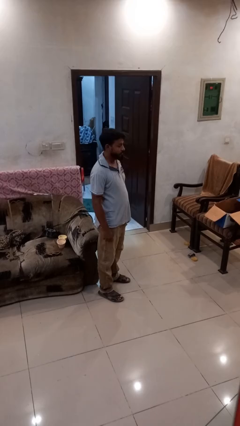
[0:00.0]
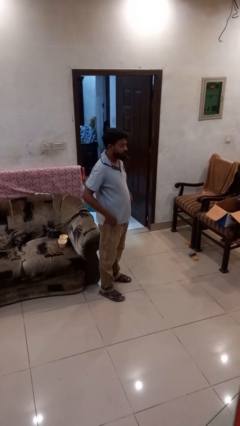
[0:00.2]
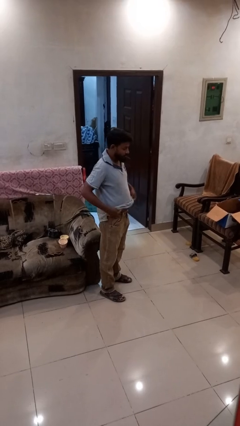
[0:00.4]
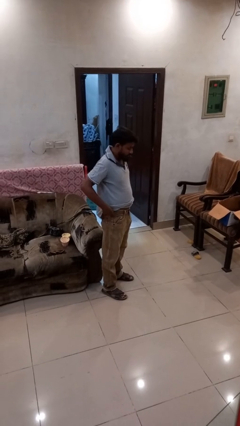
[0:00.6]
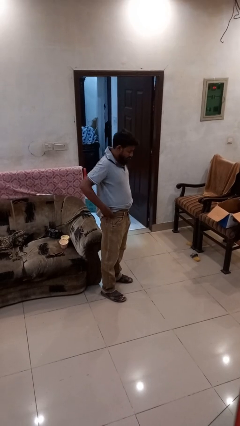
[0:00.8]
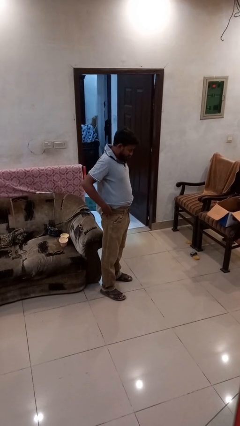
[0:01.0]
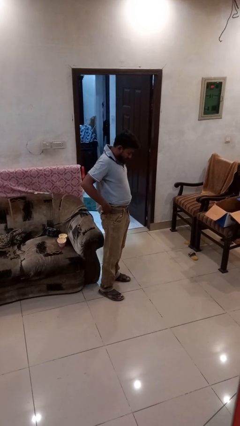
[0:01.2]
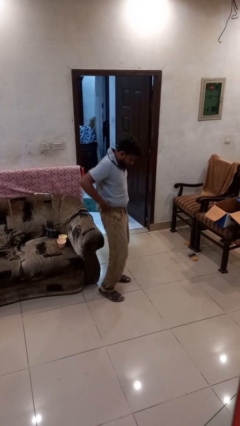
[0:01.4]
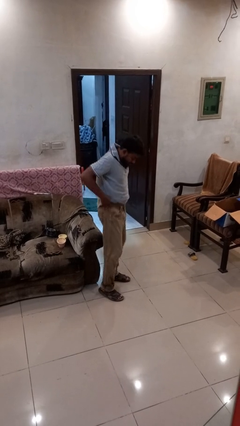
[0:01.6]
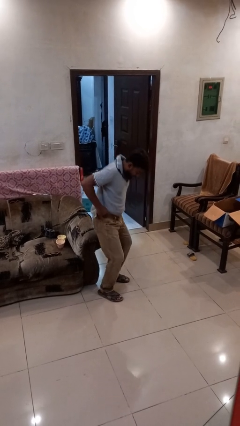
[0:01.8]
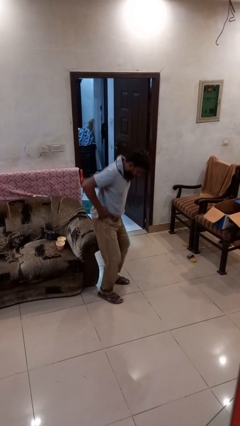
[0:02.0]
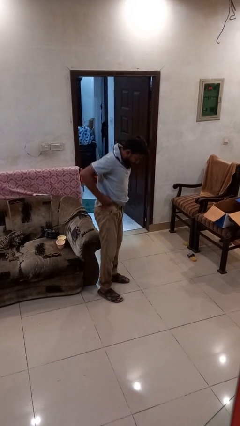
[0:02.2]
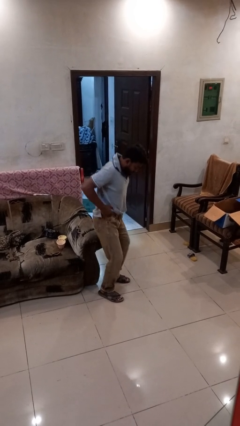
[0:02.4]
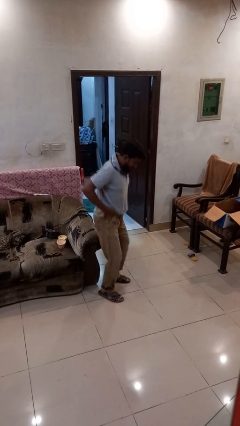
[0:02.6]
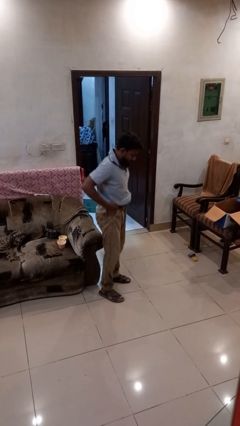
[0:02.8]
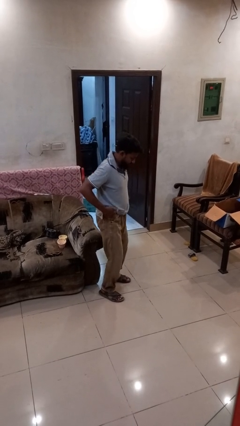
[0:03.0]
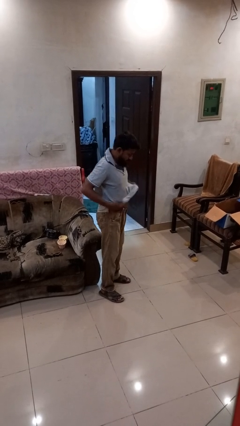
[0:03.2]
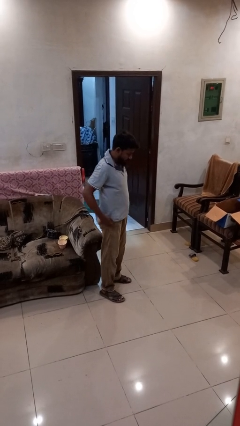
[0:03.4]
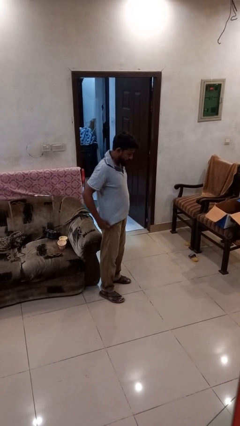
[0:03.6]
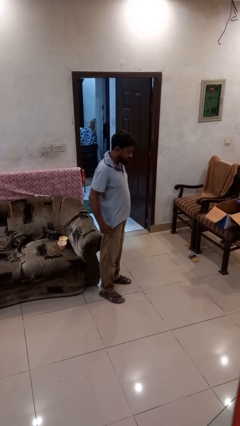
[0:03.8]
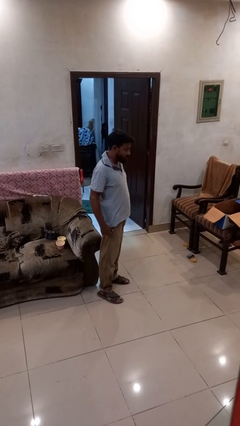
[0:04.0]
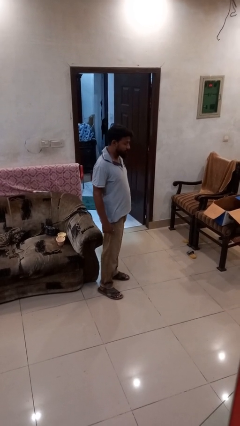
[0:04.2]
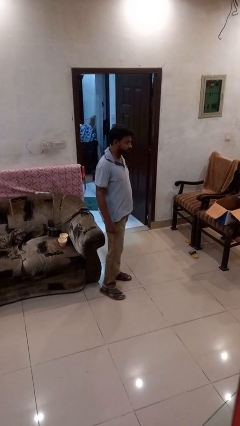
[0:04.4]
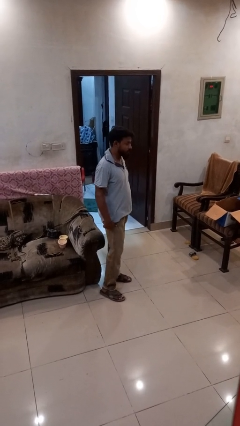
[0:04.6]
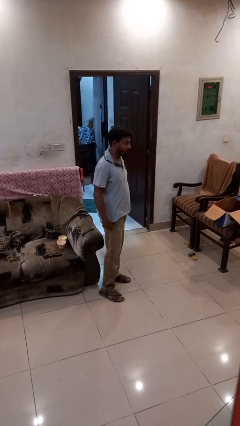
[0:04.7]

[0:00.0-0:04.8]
person hikes up pants

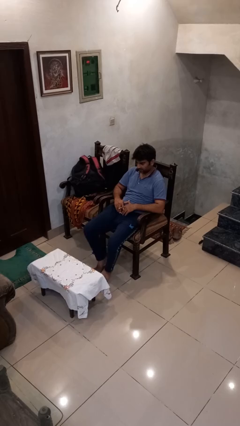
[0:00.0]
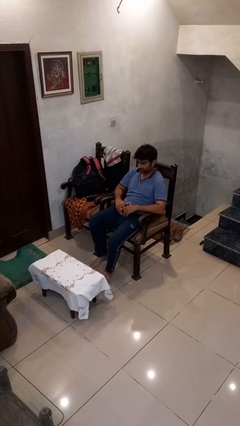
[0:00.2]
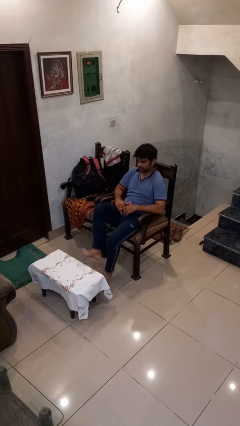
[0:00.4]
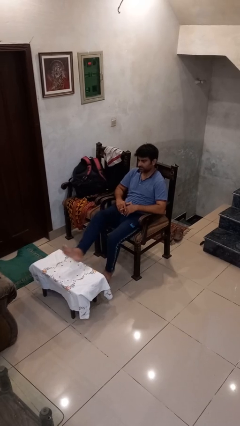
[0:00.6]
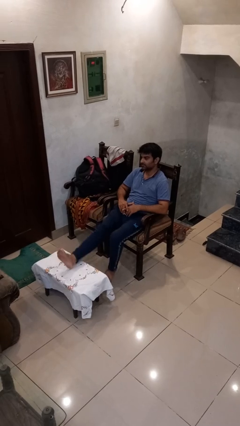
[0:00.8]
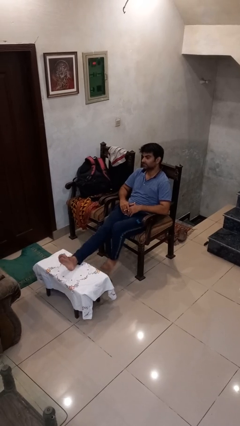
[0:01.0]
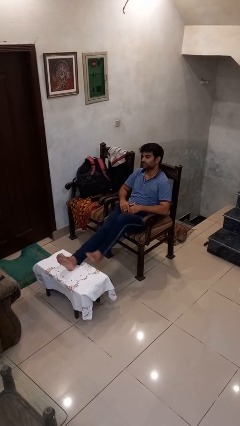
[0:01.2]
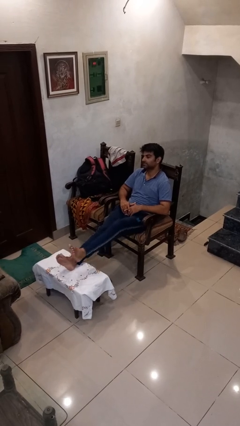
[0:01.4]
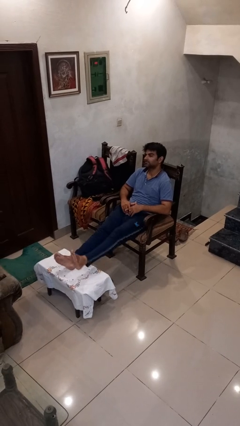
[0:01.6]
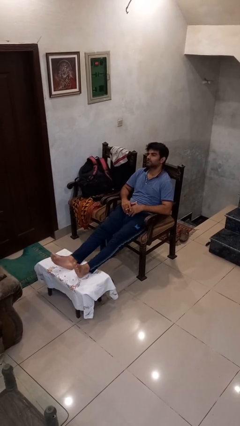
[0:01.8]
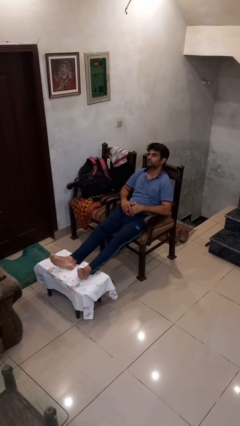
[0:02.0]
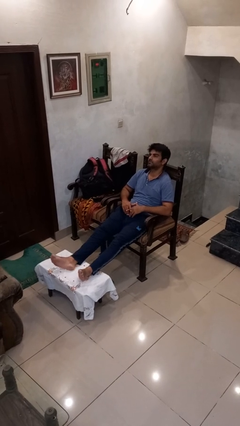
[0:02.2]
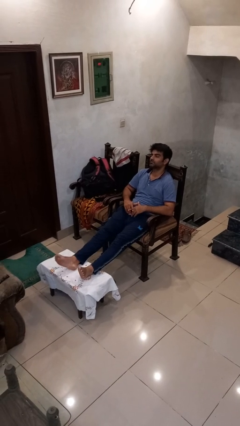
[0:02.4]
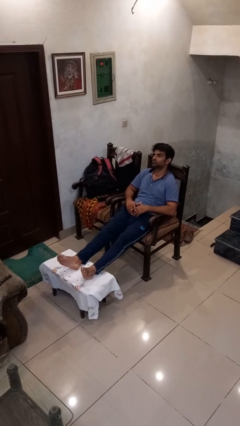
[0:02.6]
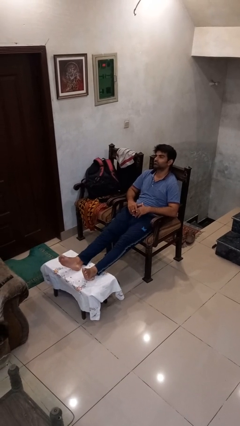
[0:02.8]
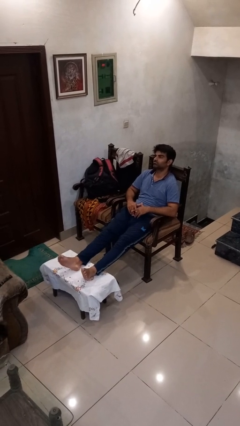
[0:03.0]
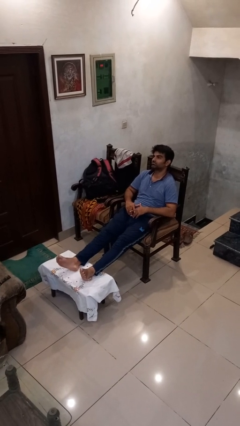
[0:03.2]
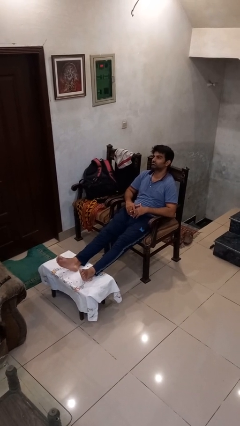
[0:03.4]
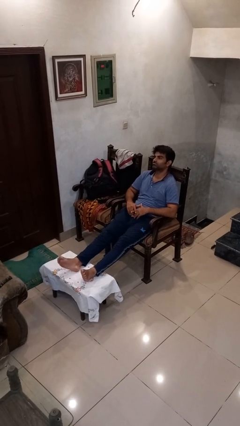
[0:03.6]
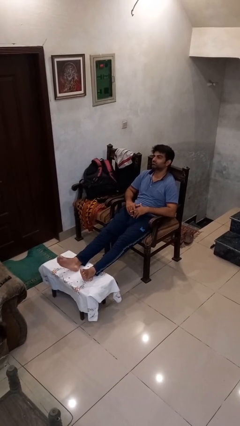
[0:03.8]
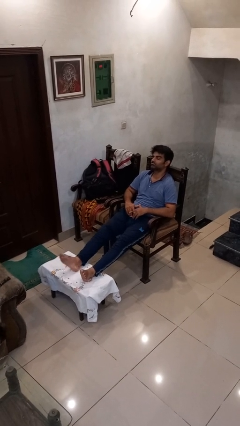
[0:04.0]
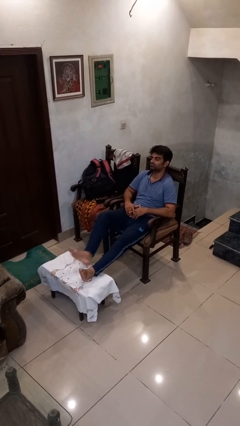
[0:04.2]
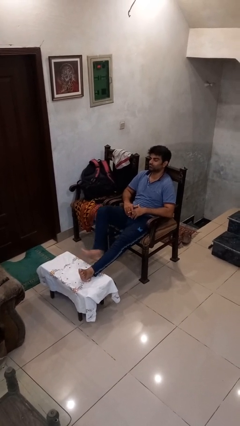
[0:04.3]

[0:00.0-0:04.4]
person puts feet up

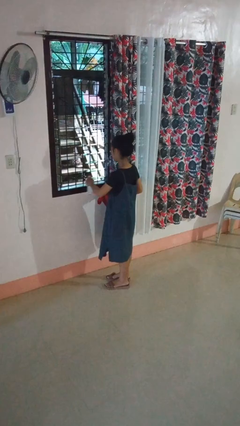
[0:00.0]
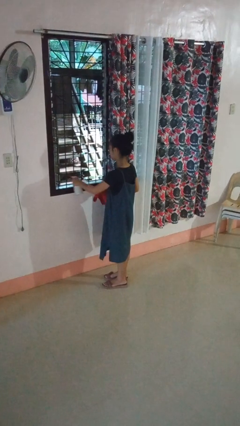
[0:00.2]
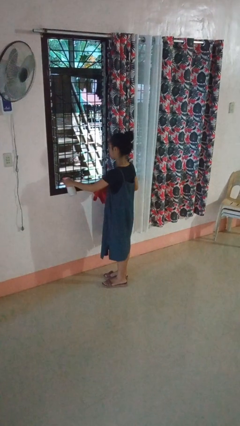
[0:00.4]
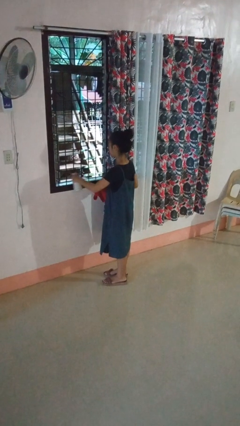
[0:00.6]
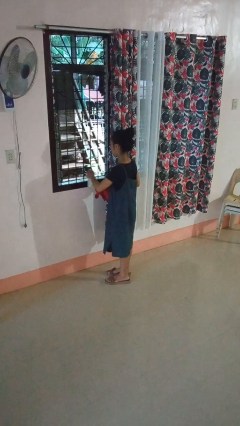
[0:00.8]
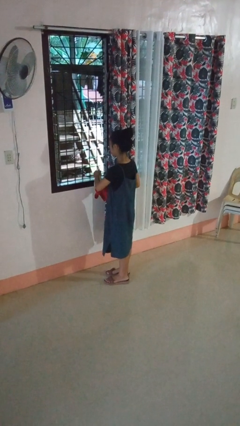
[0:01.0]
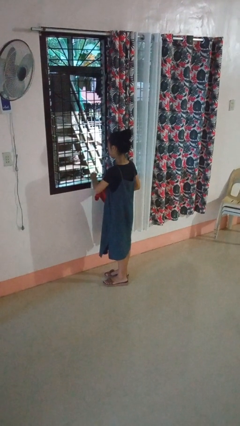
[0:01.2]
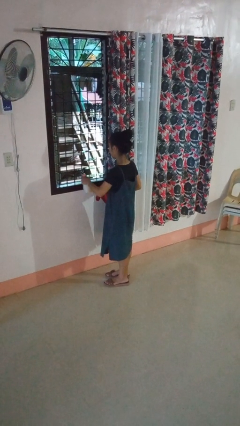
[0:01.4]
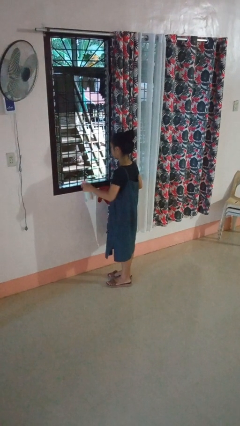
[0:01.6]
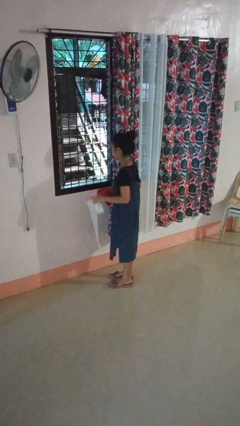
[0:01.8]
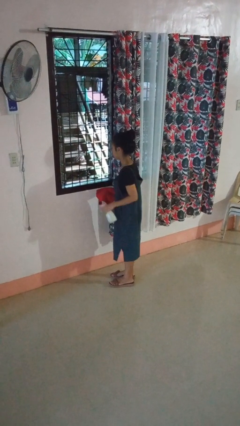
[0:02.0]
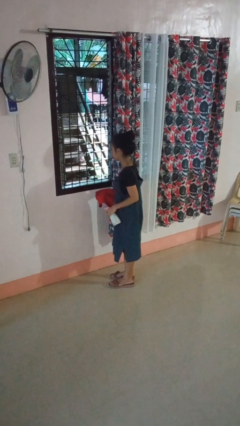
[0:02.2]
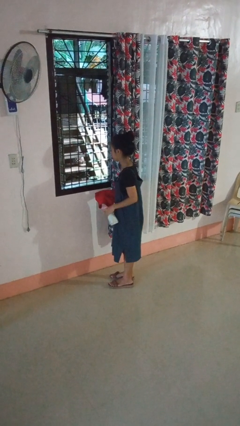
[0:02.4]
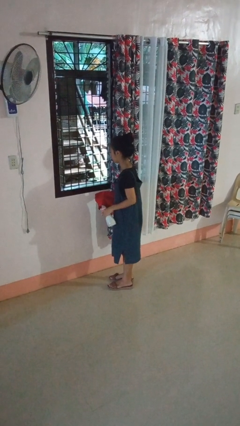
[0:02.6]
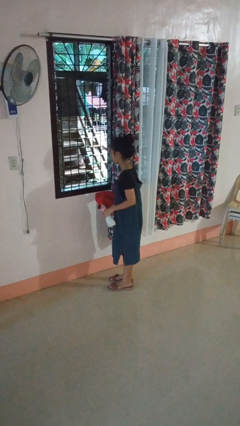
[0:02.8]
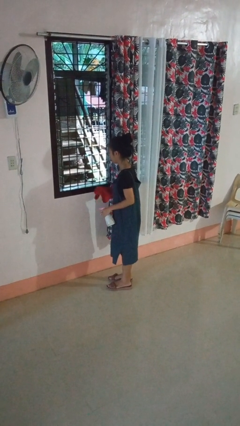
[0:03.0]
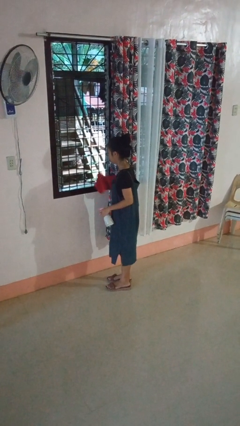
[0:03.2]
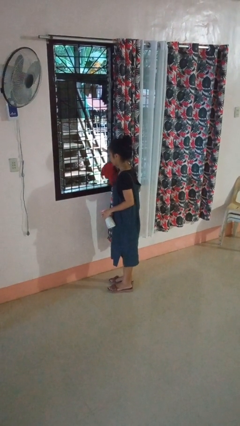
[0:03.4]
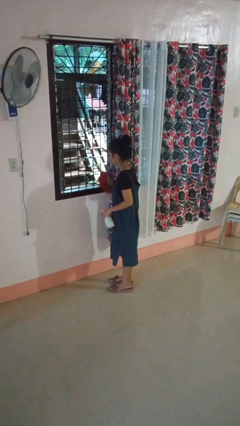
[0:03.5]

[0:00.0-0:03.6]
person sprays from bottle

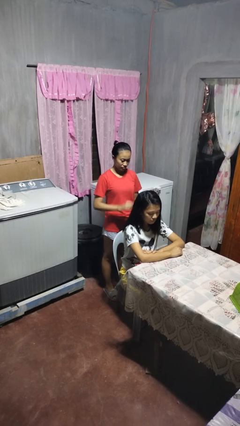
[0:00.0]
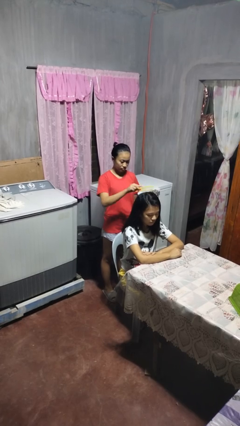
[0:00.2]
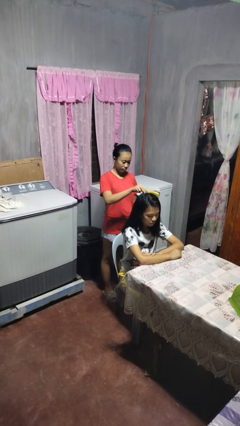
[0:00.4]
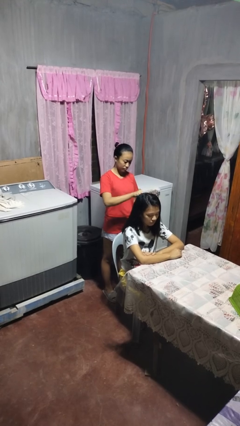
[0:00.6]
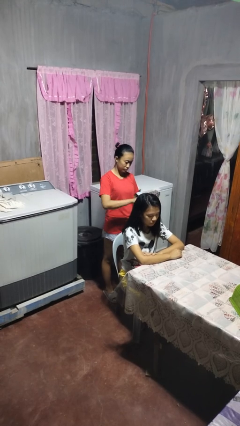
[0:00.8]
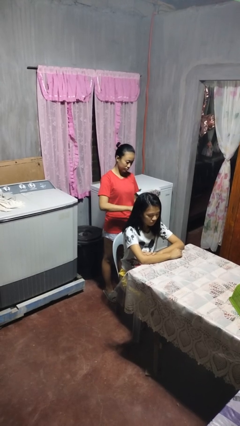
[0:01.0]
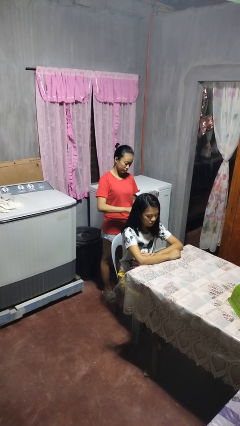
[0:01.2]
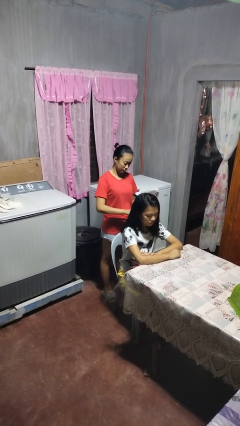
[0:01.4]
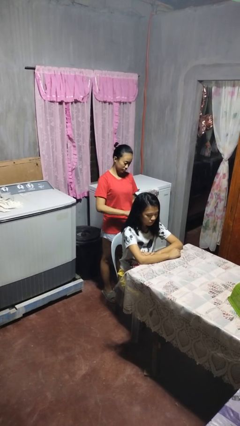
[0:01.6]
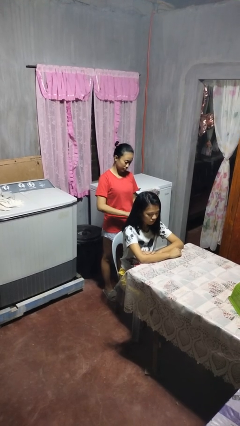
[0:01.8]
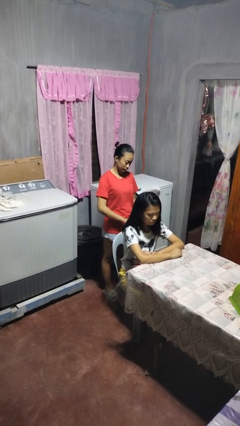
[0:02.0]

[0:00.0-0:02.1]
person brushes hair of person

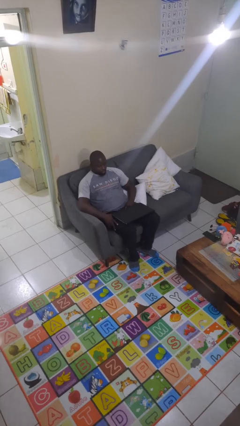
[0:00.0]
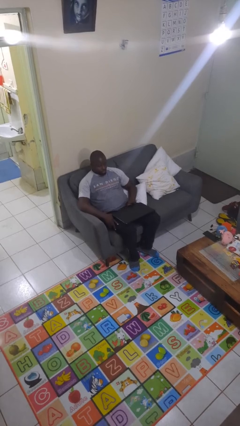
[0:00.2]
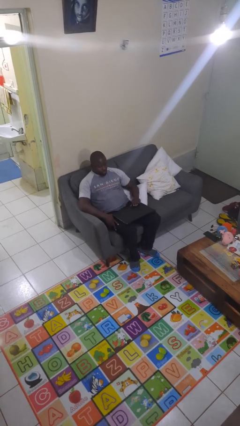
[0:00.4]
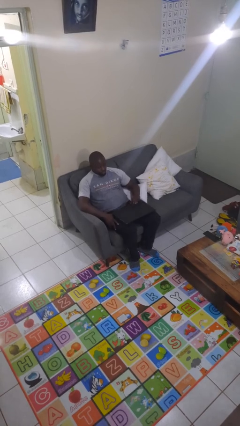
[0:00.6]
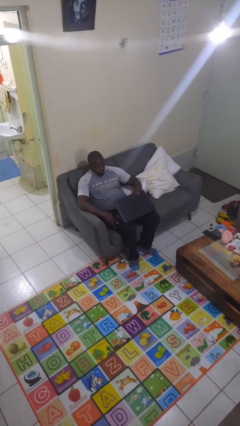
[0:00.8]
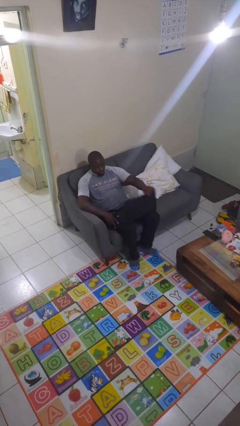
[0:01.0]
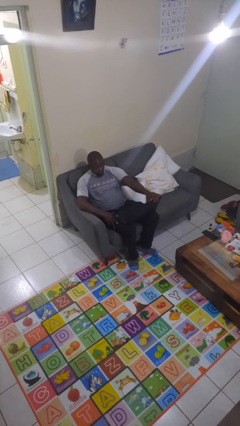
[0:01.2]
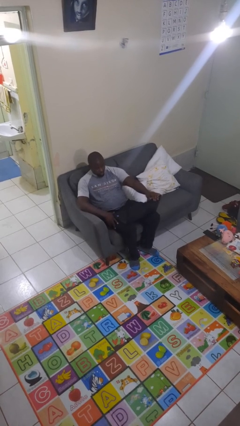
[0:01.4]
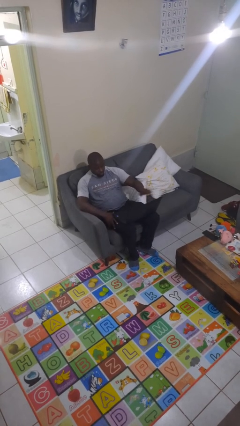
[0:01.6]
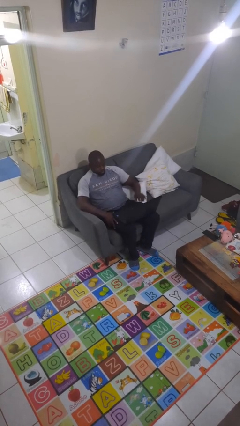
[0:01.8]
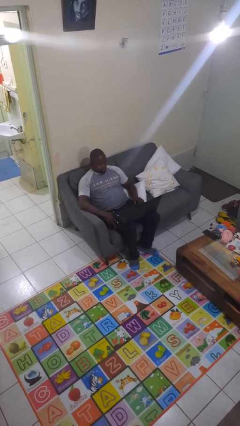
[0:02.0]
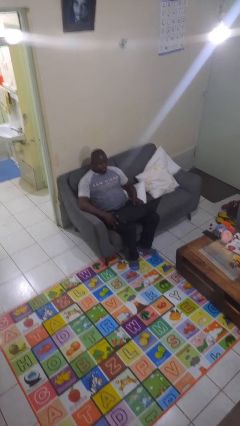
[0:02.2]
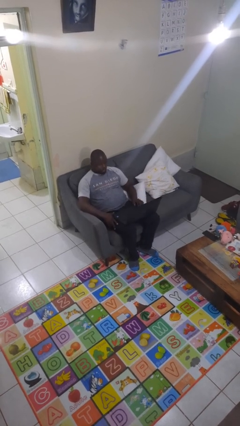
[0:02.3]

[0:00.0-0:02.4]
person opens laptop

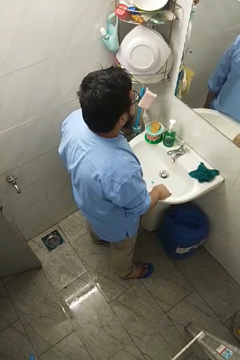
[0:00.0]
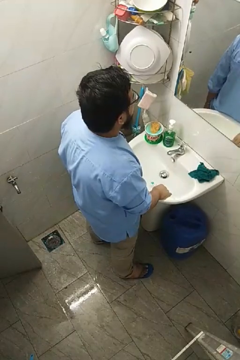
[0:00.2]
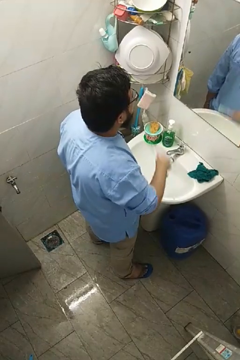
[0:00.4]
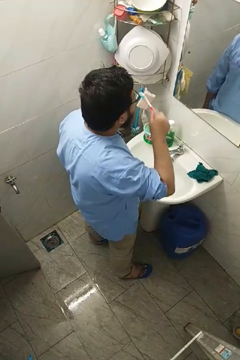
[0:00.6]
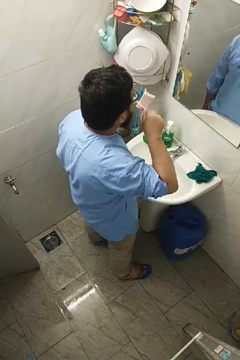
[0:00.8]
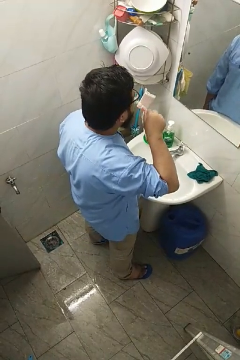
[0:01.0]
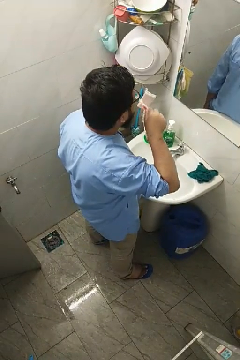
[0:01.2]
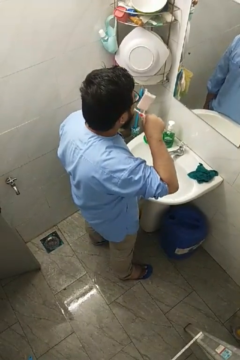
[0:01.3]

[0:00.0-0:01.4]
person brushes teeth
